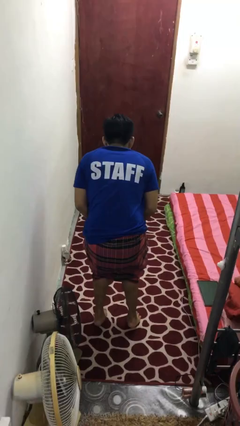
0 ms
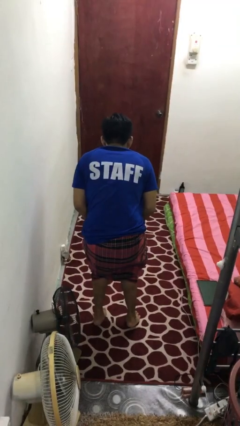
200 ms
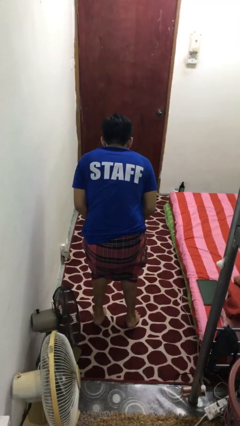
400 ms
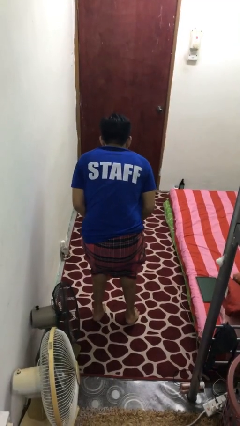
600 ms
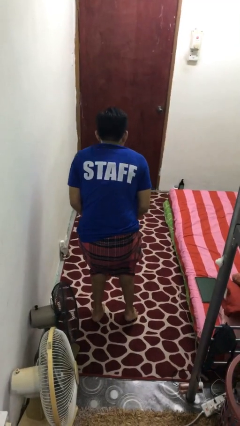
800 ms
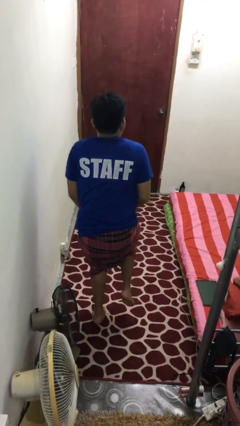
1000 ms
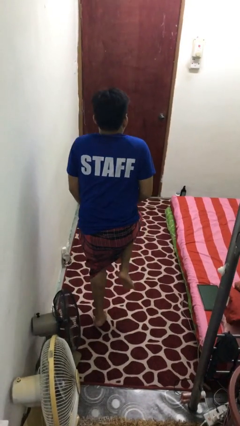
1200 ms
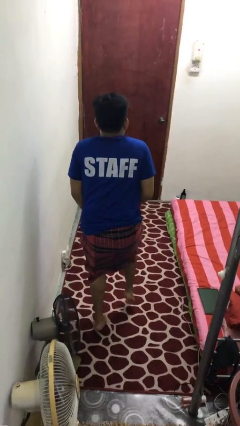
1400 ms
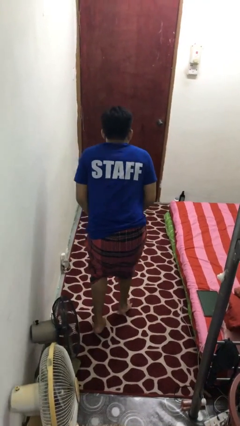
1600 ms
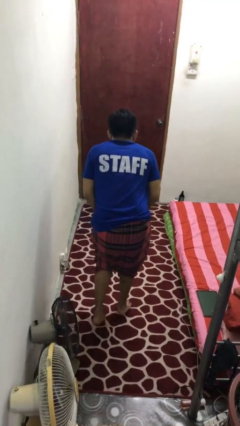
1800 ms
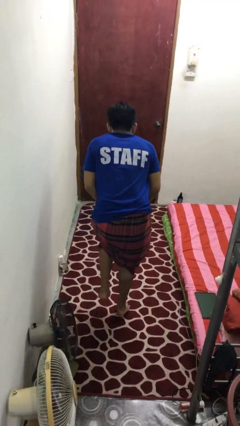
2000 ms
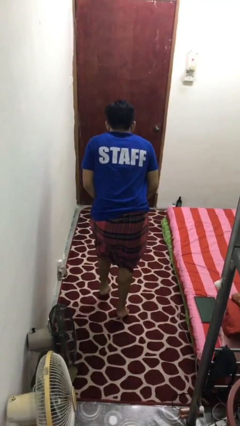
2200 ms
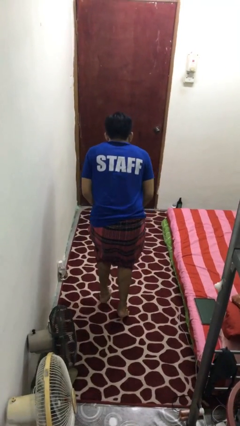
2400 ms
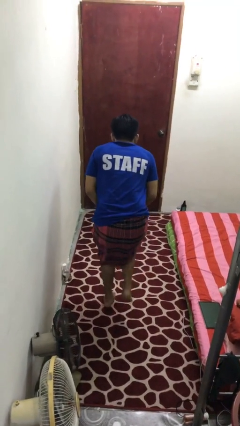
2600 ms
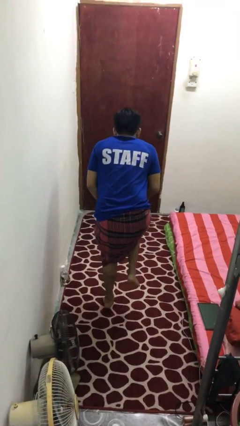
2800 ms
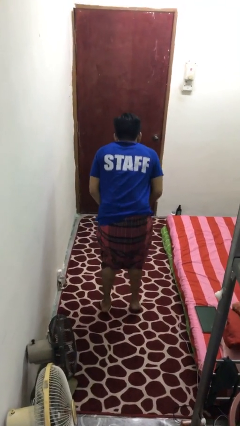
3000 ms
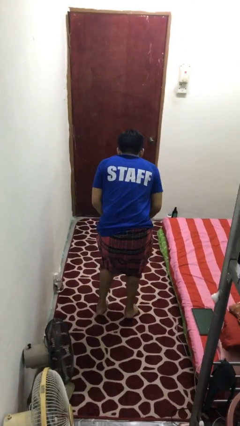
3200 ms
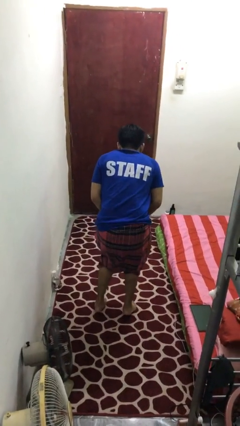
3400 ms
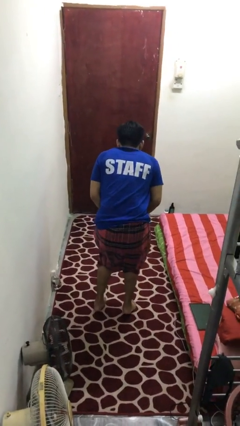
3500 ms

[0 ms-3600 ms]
person walks tiptoe

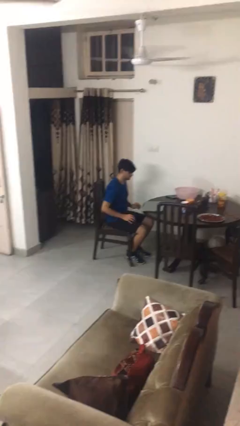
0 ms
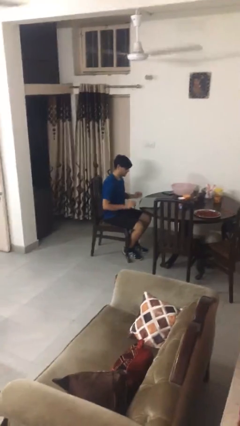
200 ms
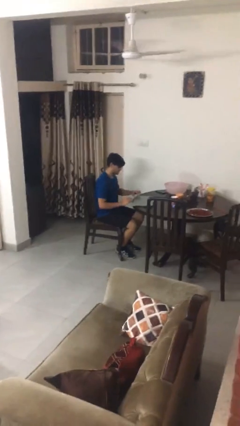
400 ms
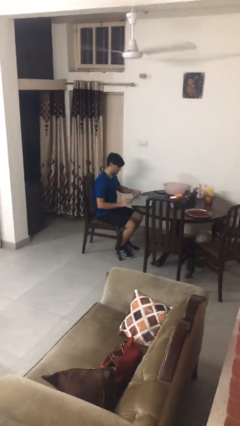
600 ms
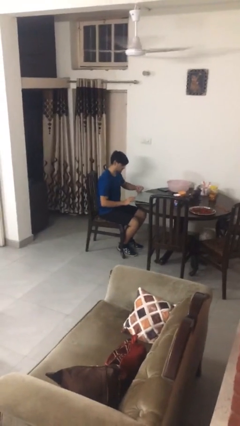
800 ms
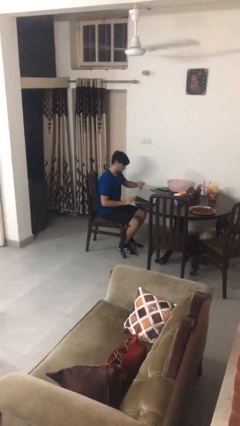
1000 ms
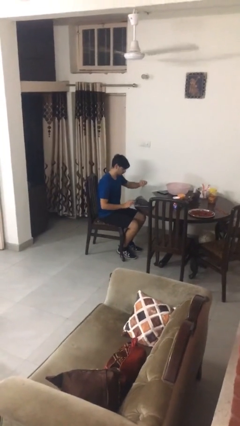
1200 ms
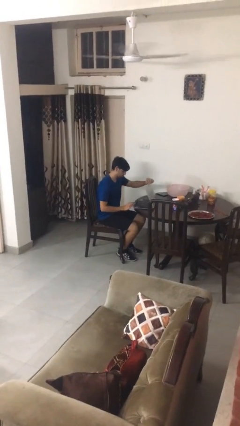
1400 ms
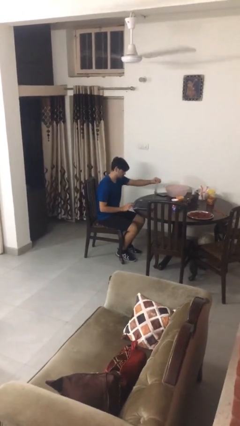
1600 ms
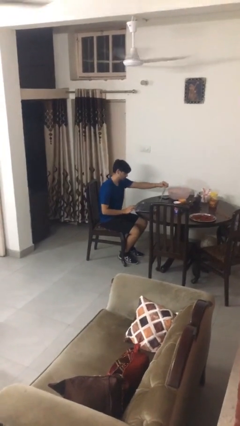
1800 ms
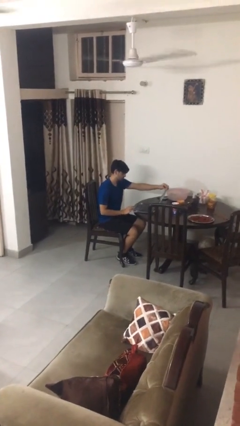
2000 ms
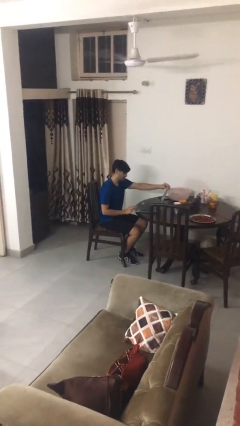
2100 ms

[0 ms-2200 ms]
person opens laptop

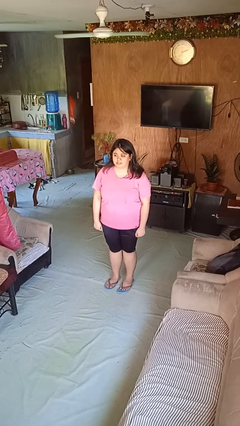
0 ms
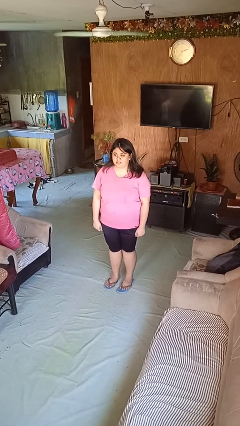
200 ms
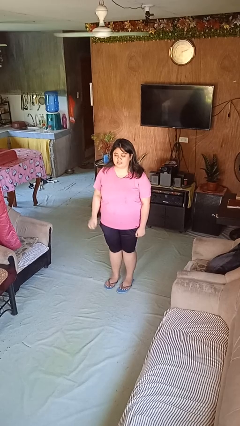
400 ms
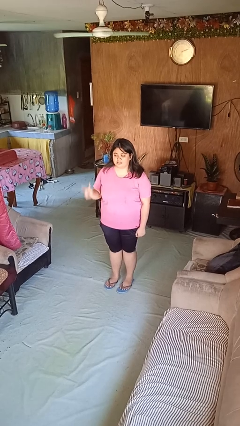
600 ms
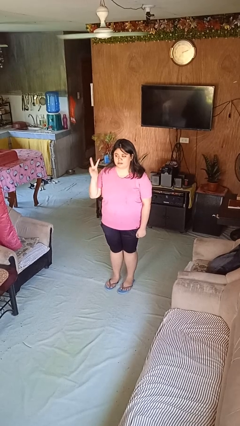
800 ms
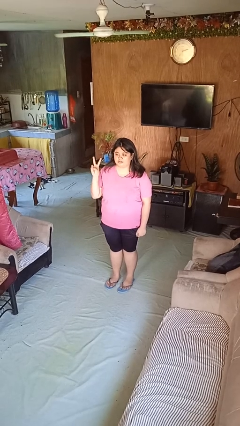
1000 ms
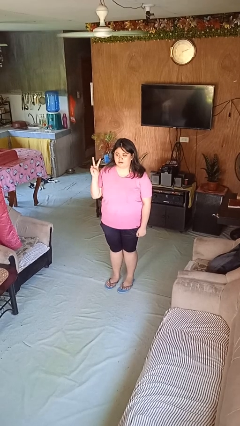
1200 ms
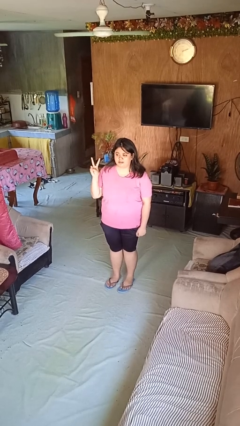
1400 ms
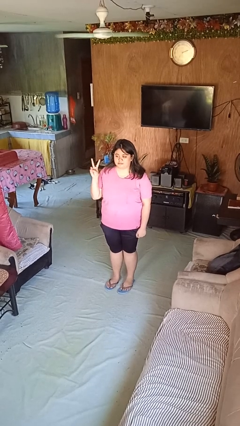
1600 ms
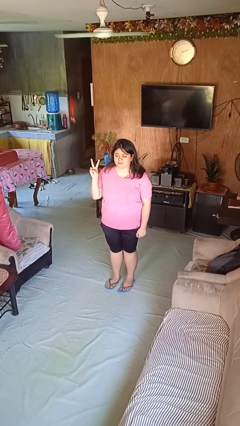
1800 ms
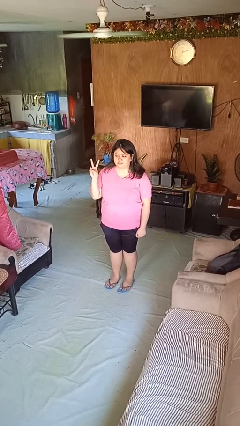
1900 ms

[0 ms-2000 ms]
person gestures peace

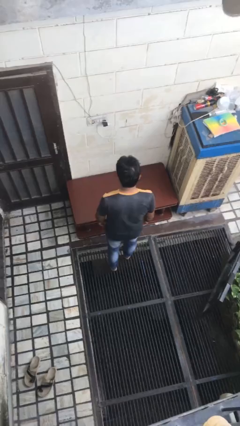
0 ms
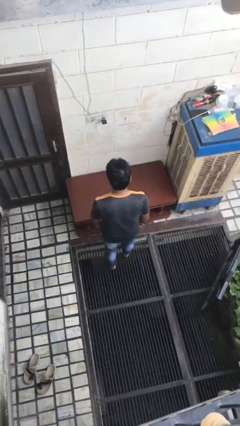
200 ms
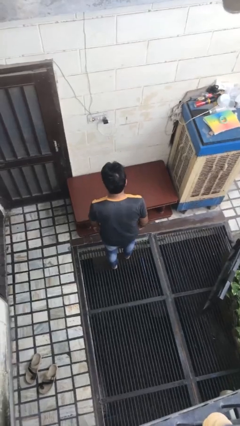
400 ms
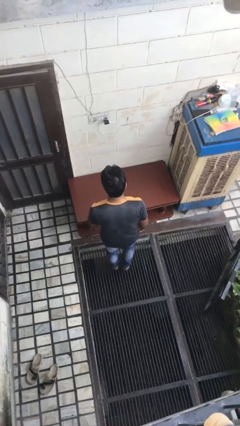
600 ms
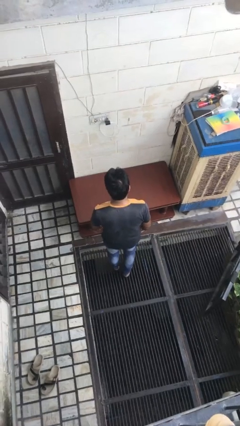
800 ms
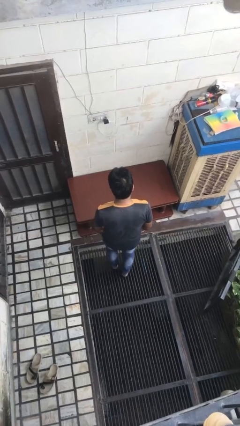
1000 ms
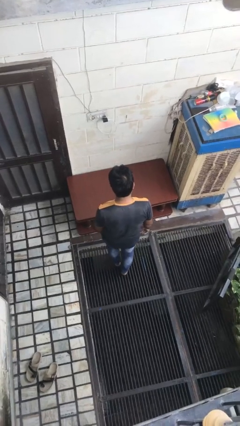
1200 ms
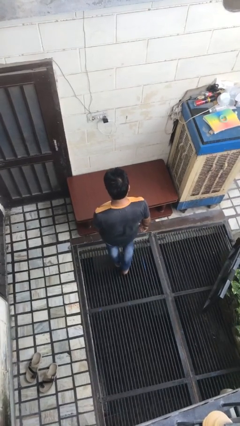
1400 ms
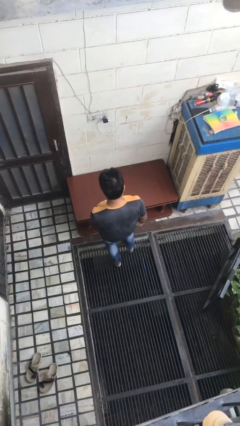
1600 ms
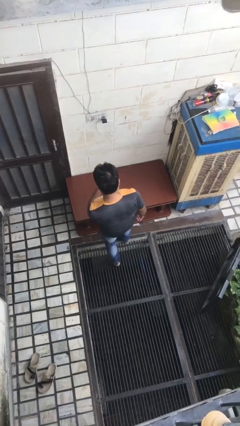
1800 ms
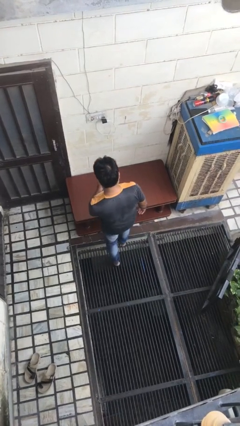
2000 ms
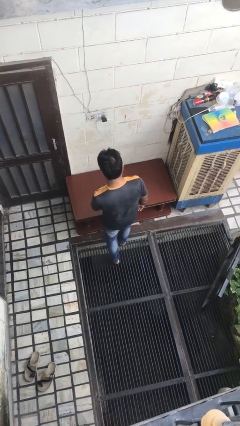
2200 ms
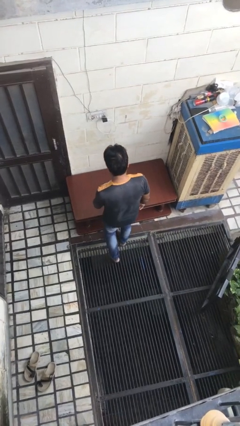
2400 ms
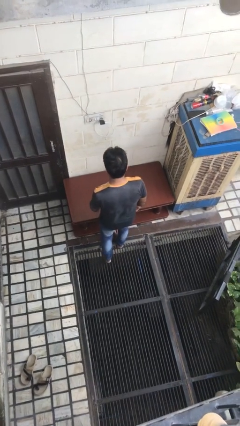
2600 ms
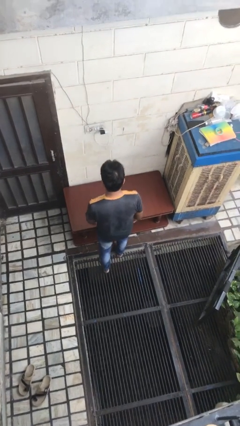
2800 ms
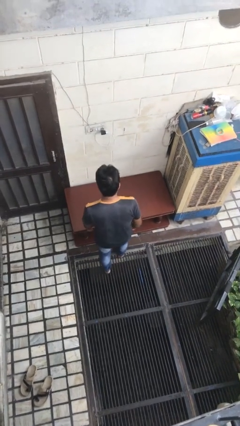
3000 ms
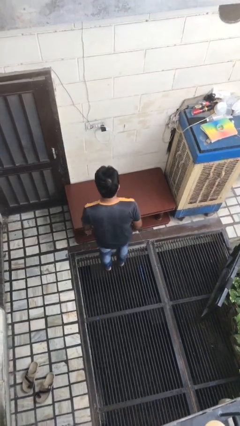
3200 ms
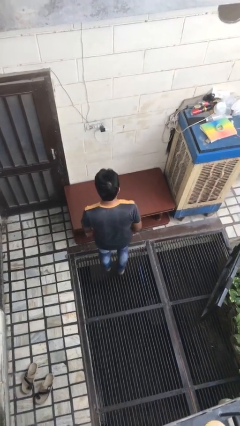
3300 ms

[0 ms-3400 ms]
person stubs toe

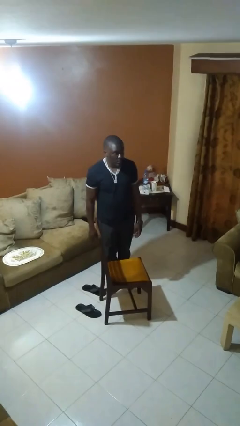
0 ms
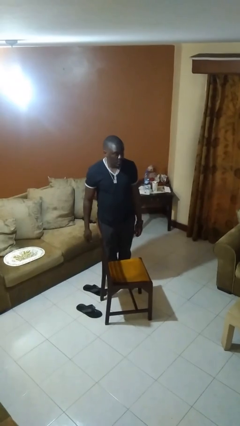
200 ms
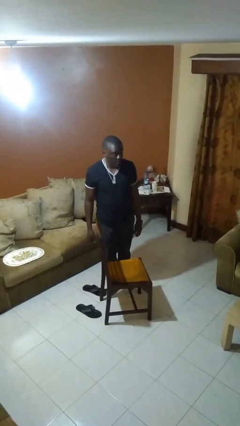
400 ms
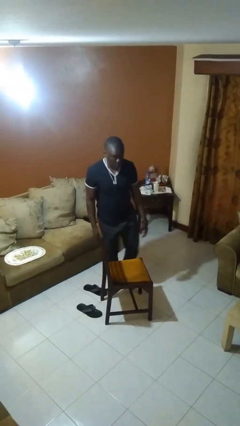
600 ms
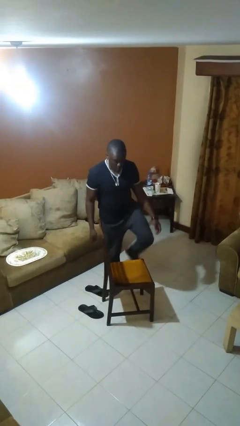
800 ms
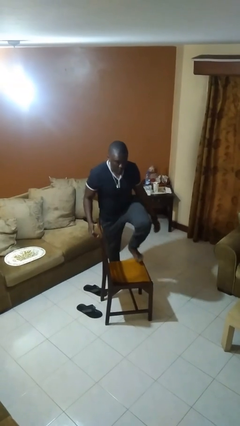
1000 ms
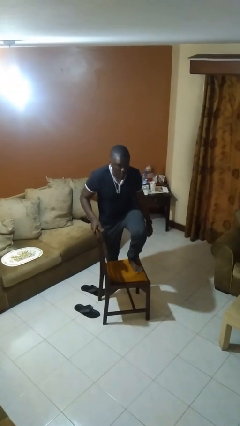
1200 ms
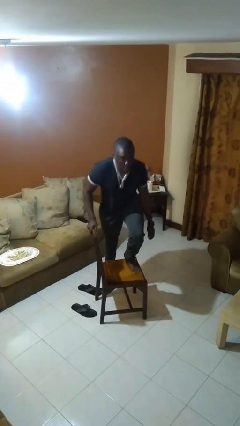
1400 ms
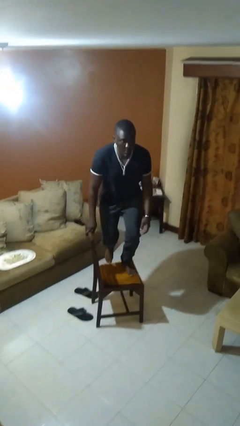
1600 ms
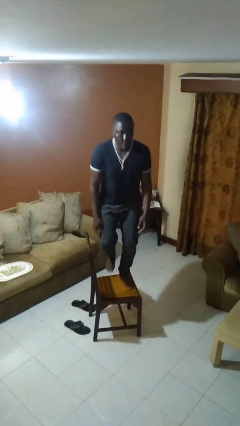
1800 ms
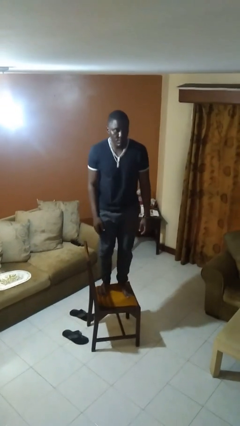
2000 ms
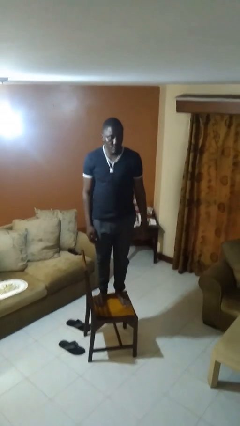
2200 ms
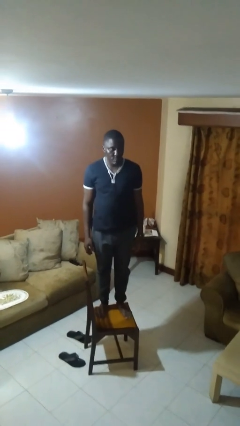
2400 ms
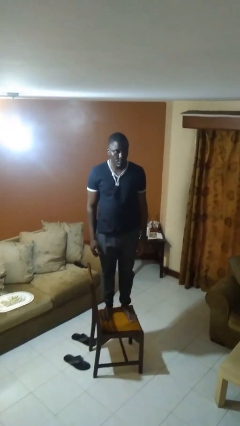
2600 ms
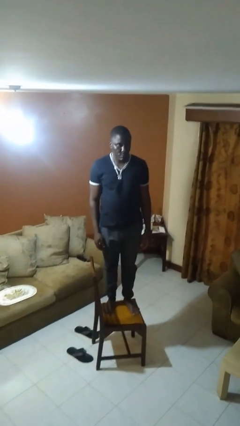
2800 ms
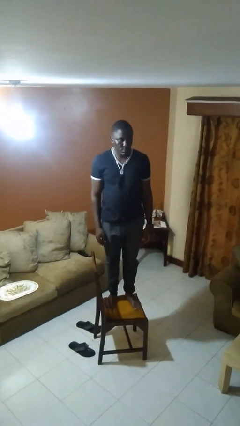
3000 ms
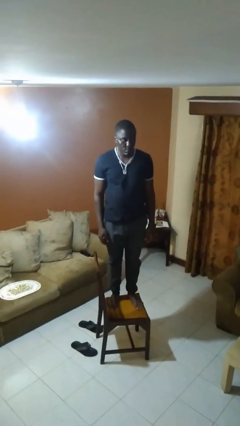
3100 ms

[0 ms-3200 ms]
person climbs on chair

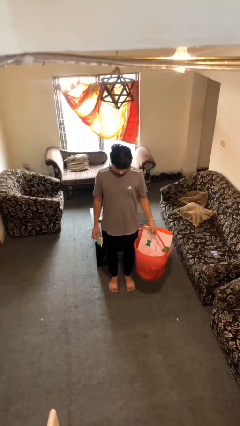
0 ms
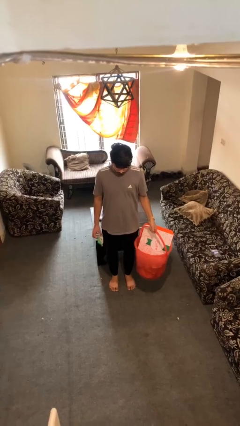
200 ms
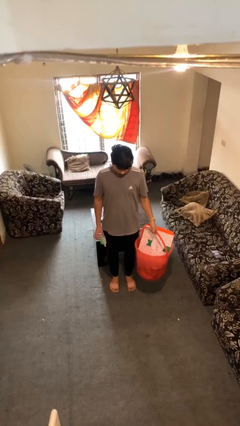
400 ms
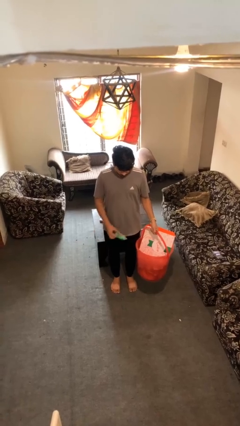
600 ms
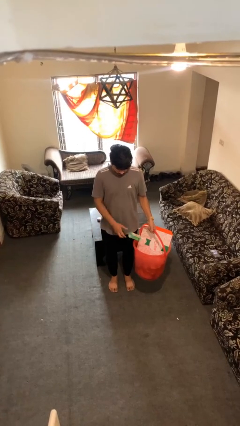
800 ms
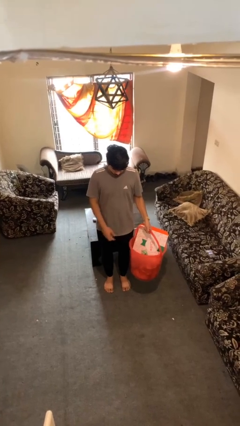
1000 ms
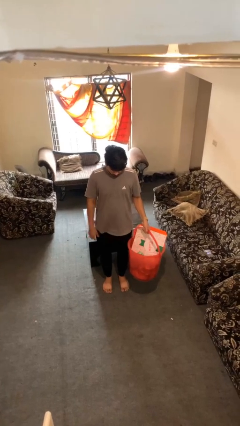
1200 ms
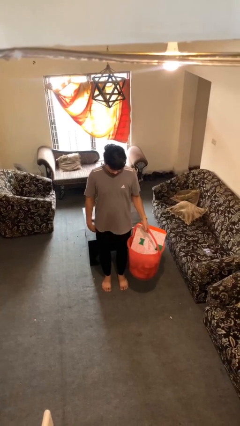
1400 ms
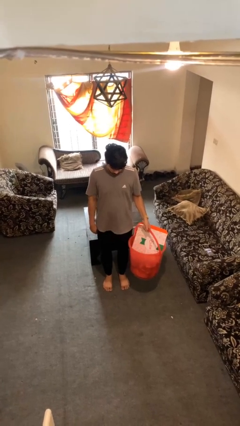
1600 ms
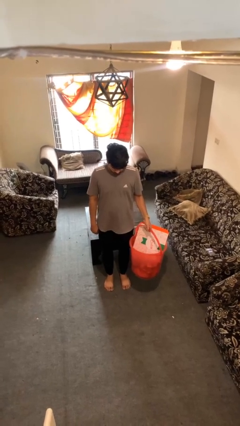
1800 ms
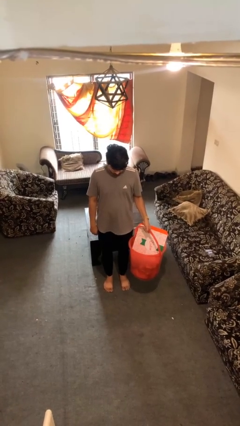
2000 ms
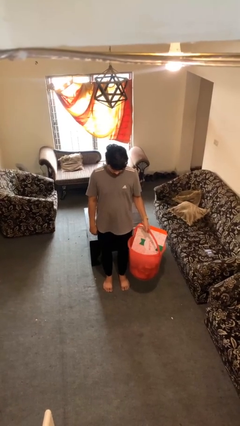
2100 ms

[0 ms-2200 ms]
person puts object into basket

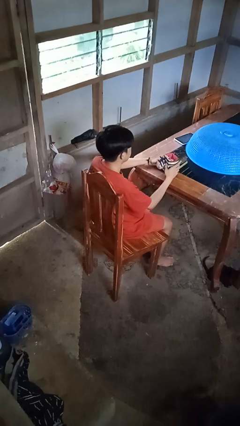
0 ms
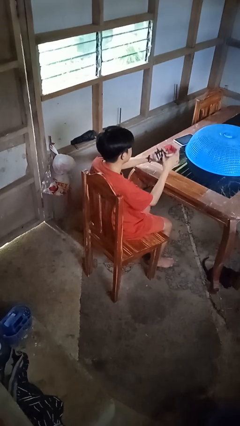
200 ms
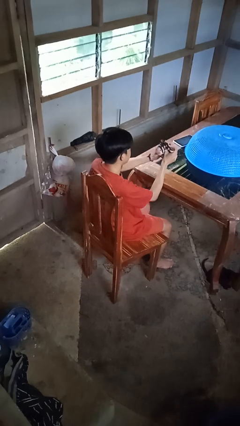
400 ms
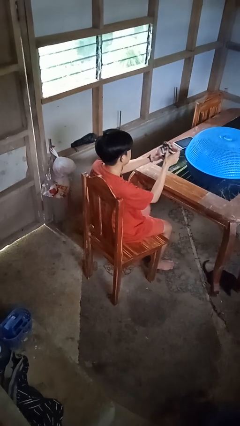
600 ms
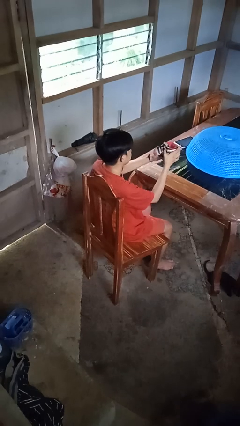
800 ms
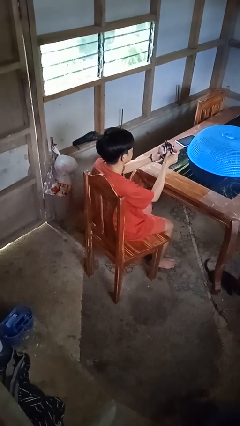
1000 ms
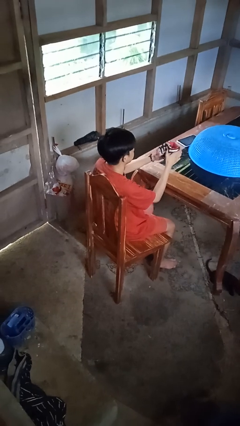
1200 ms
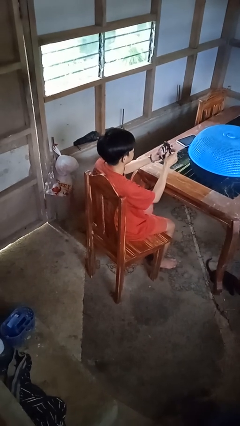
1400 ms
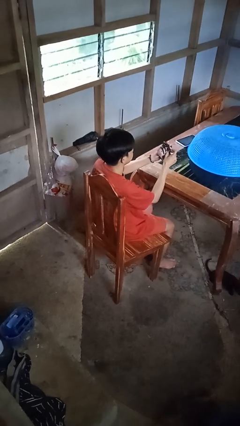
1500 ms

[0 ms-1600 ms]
person squeezes object
